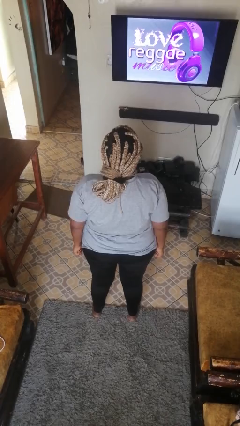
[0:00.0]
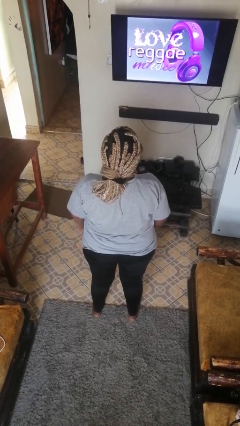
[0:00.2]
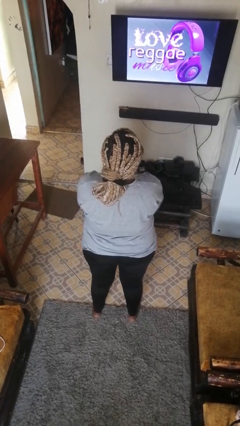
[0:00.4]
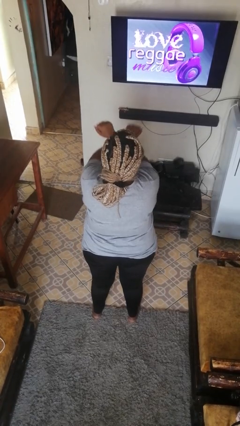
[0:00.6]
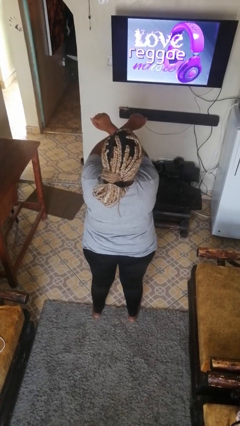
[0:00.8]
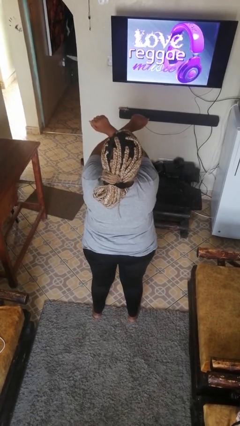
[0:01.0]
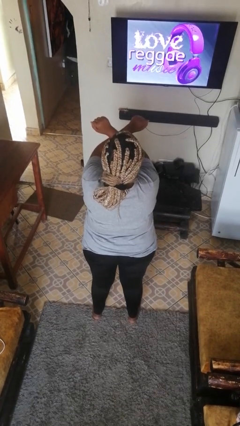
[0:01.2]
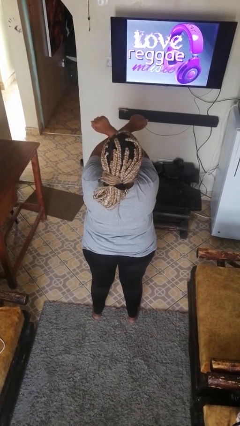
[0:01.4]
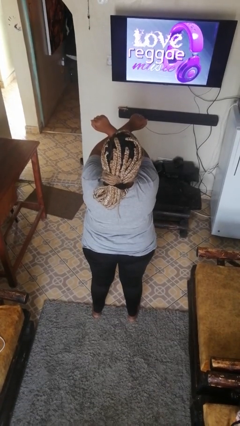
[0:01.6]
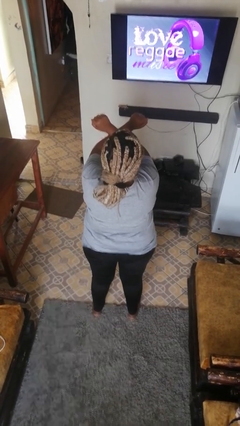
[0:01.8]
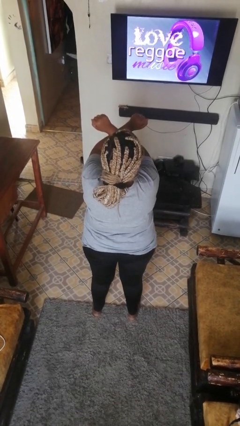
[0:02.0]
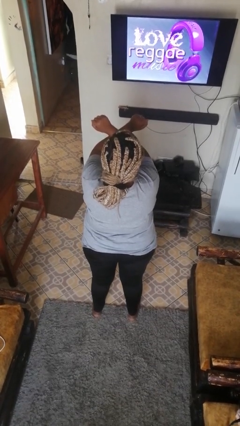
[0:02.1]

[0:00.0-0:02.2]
person gestures arms x

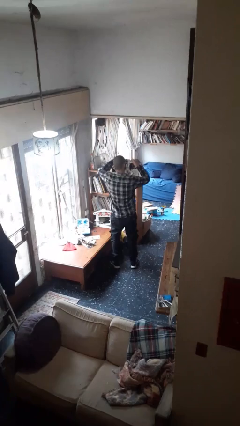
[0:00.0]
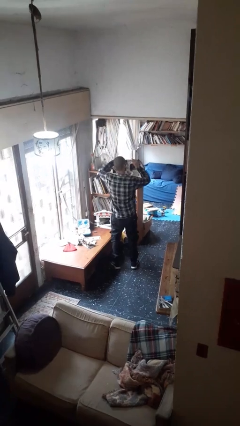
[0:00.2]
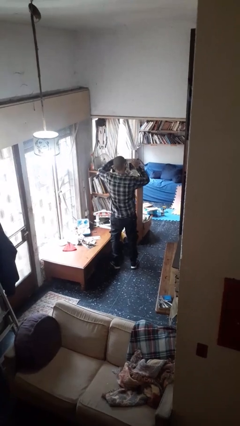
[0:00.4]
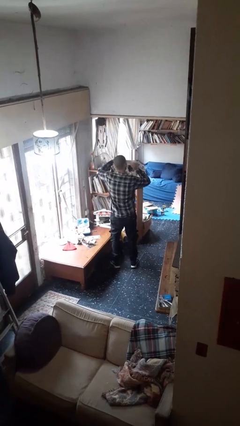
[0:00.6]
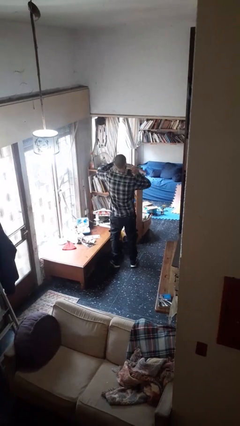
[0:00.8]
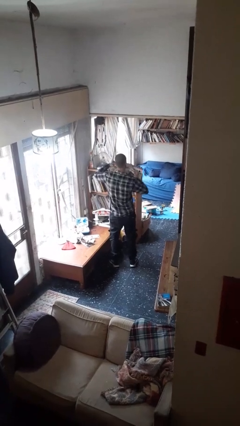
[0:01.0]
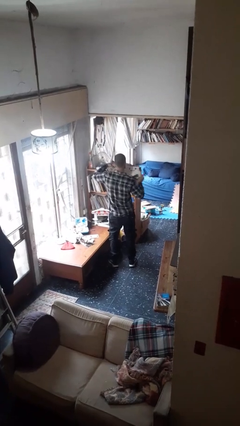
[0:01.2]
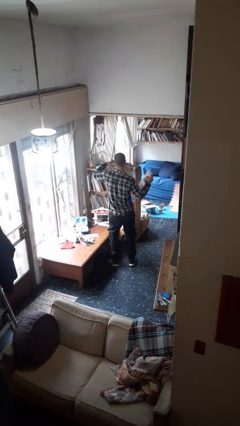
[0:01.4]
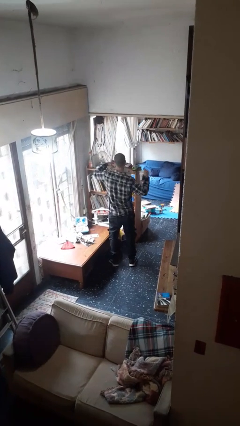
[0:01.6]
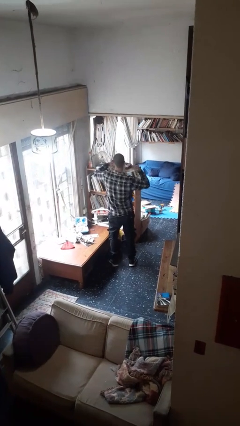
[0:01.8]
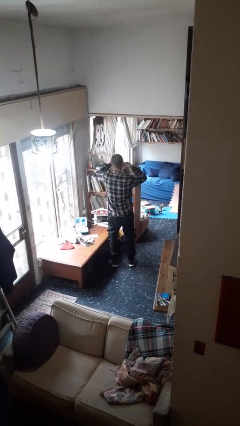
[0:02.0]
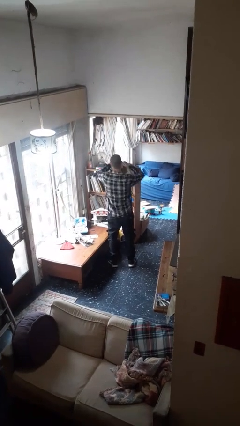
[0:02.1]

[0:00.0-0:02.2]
person tears paper

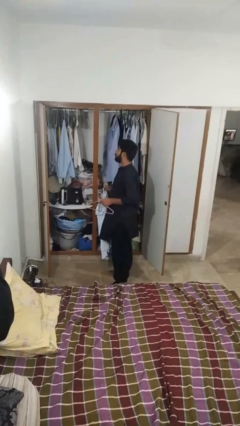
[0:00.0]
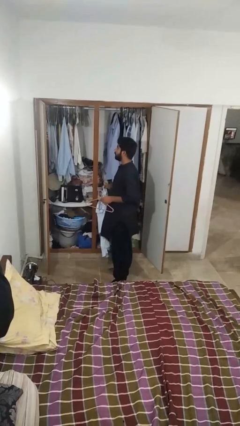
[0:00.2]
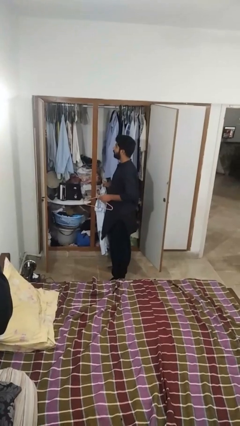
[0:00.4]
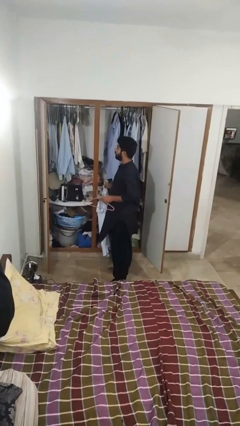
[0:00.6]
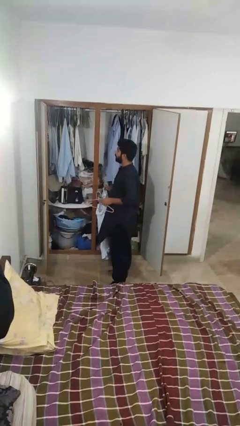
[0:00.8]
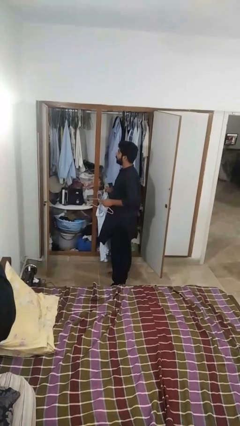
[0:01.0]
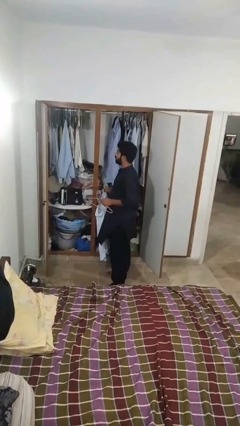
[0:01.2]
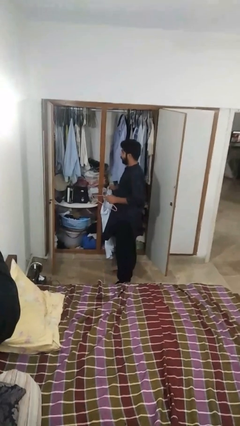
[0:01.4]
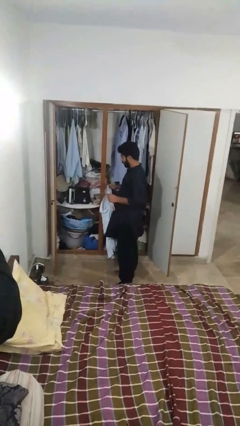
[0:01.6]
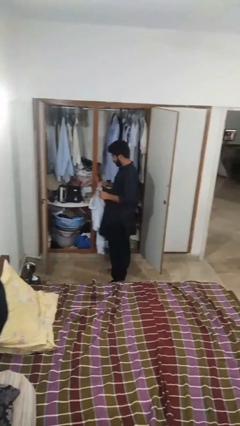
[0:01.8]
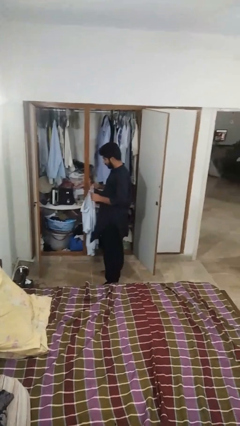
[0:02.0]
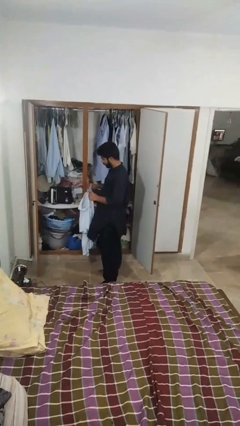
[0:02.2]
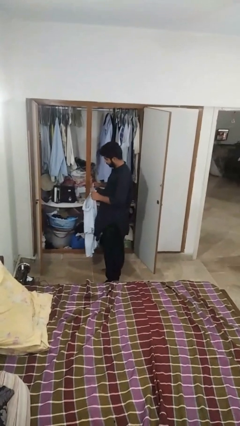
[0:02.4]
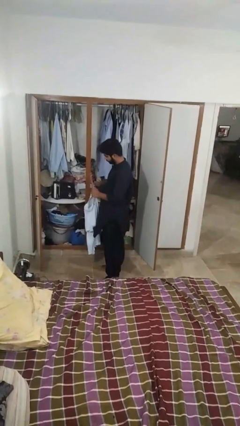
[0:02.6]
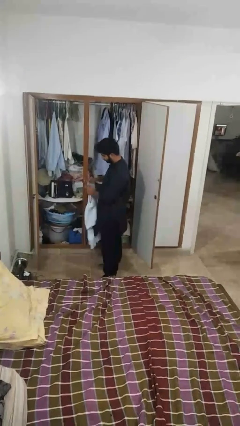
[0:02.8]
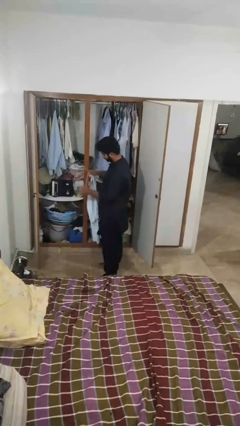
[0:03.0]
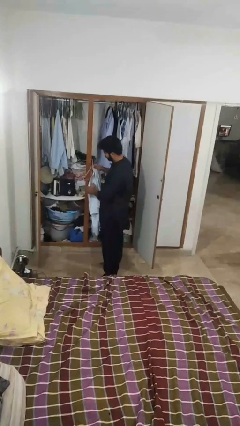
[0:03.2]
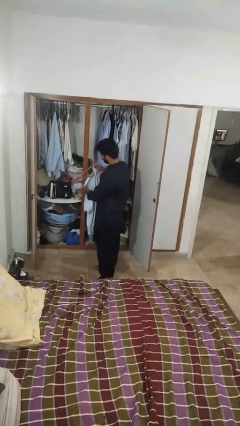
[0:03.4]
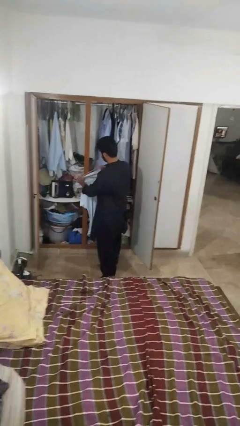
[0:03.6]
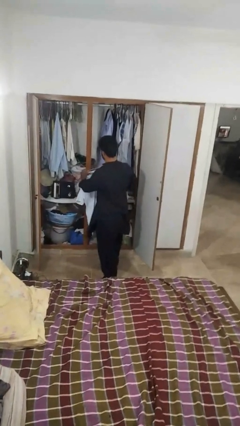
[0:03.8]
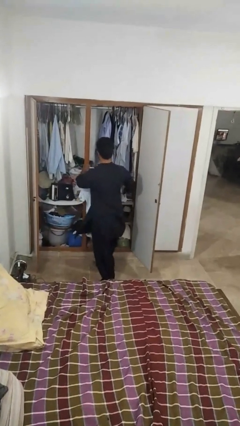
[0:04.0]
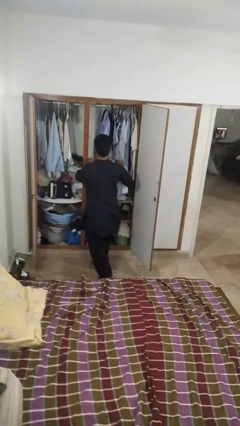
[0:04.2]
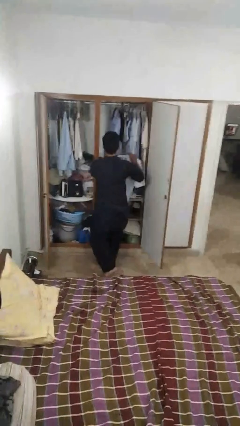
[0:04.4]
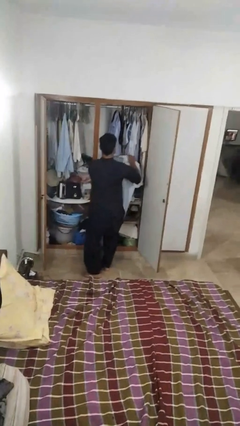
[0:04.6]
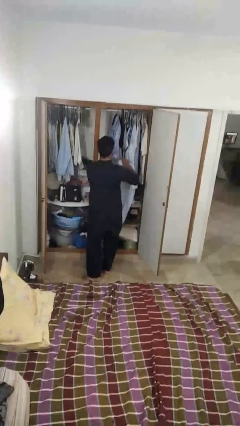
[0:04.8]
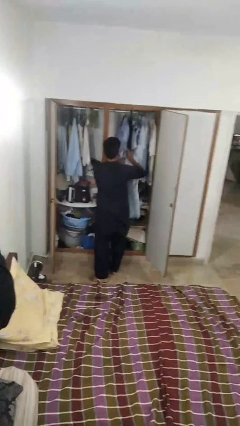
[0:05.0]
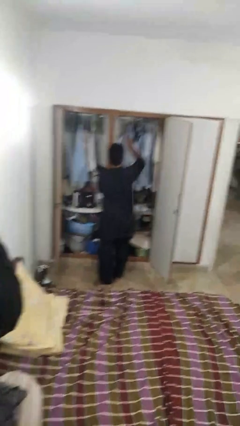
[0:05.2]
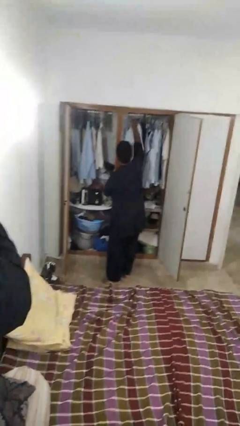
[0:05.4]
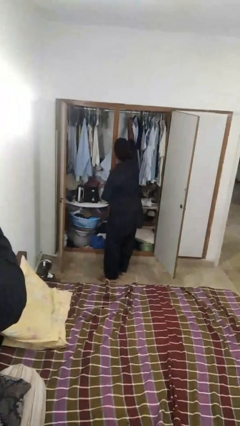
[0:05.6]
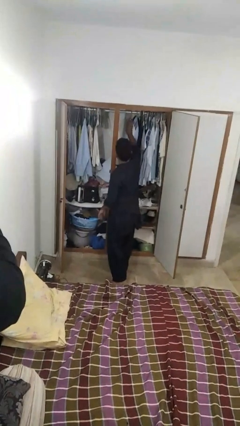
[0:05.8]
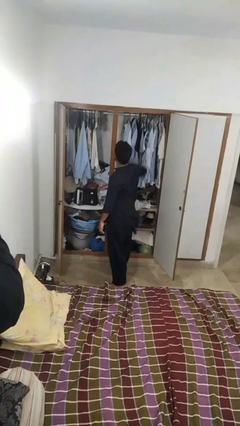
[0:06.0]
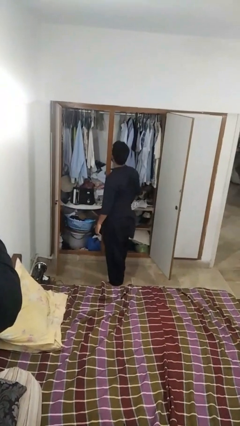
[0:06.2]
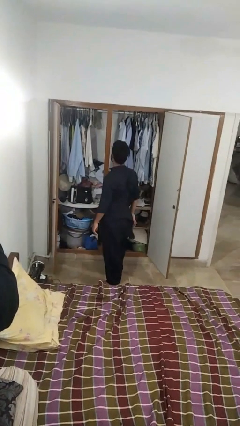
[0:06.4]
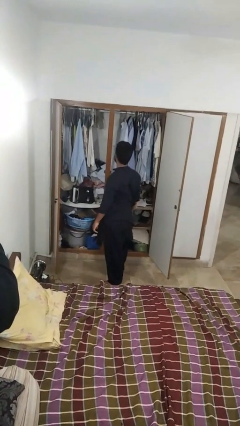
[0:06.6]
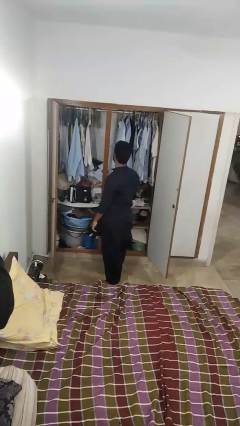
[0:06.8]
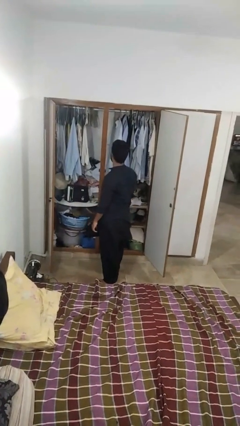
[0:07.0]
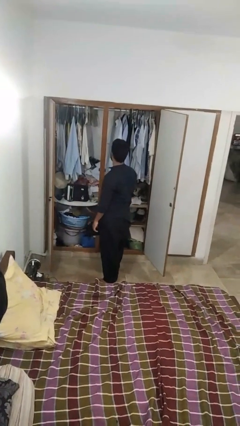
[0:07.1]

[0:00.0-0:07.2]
person puts clothes into dresser

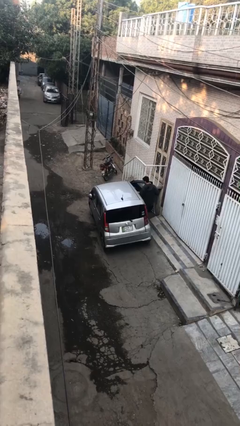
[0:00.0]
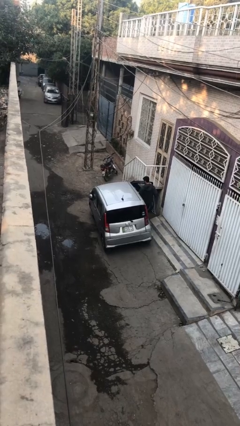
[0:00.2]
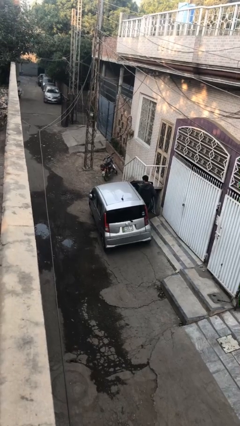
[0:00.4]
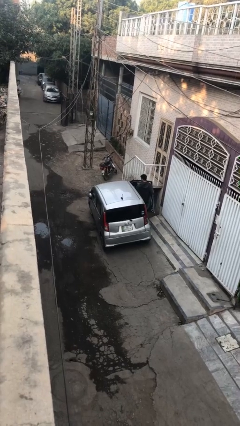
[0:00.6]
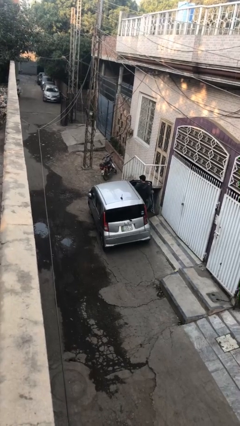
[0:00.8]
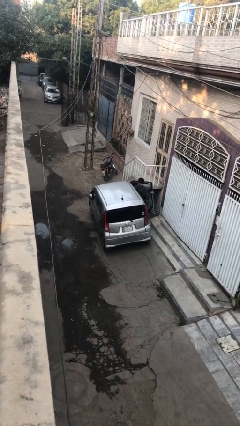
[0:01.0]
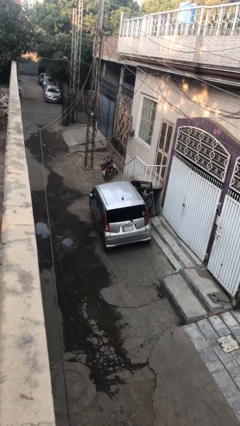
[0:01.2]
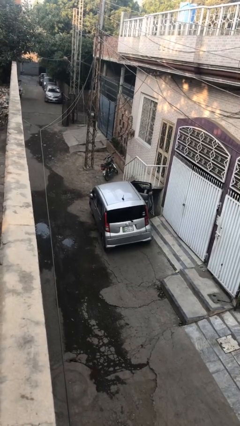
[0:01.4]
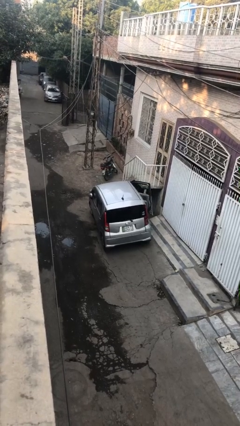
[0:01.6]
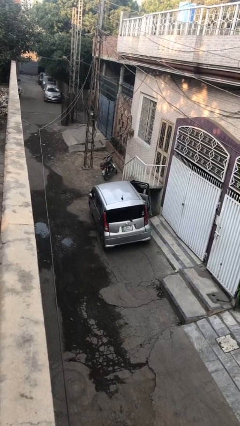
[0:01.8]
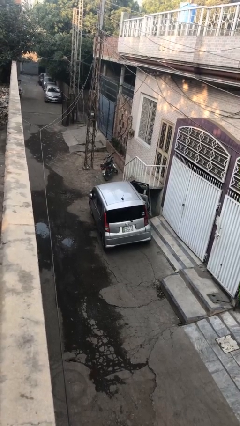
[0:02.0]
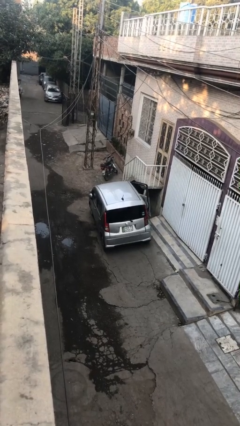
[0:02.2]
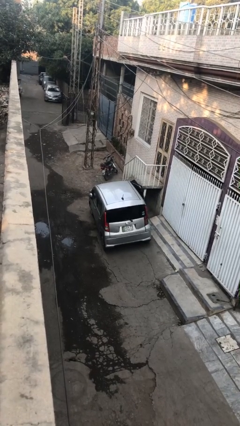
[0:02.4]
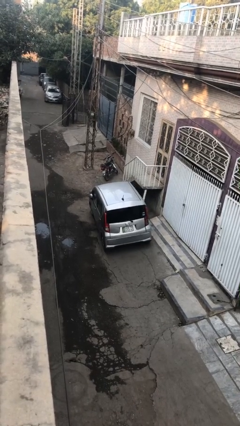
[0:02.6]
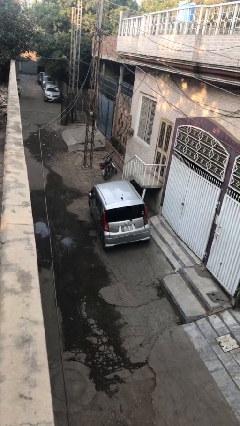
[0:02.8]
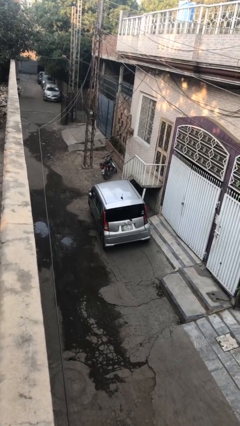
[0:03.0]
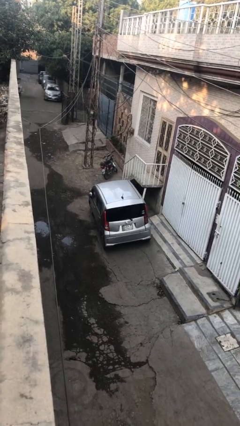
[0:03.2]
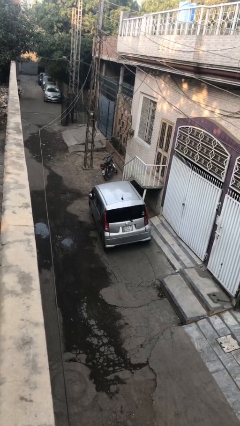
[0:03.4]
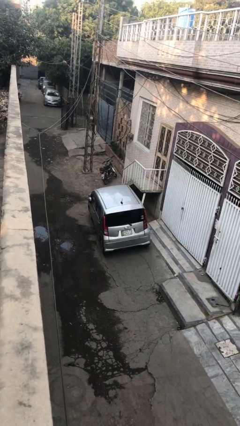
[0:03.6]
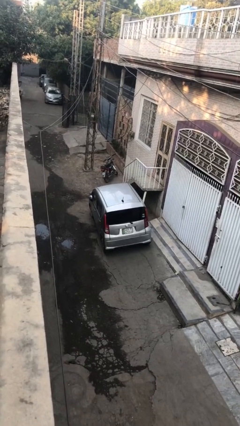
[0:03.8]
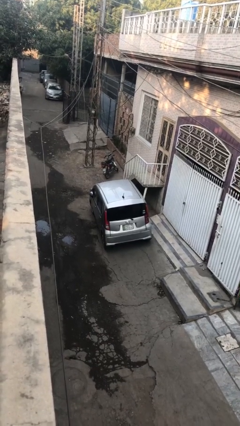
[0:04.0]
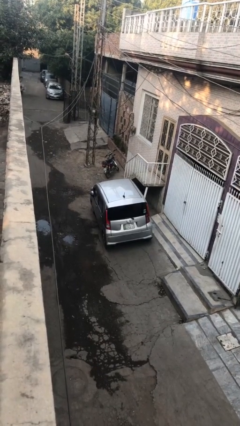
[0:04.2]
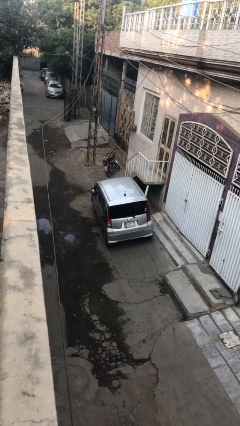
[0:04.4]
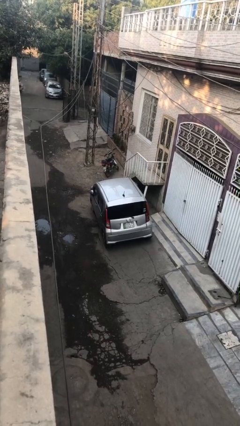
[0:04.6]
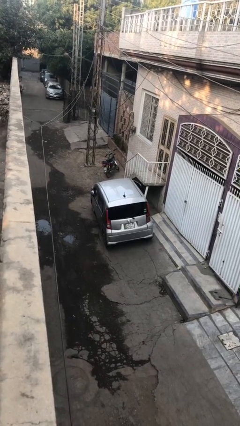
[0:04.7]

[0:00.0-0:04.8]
car picks up person

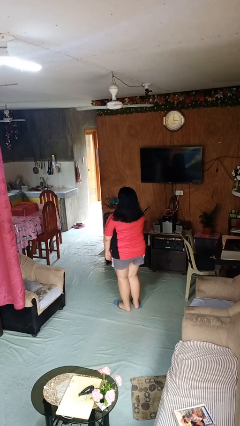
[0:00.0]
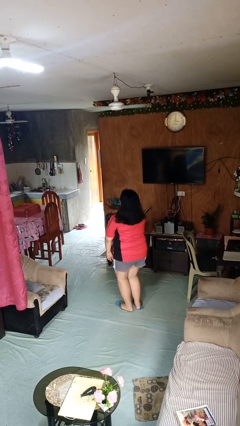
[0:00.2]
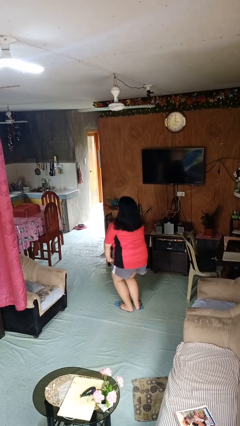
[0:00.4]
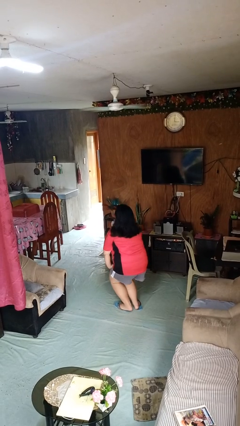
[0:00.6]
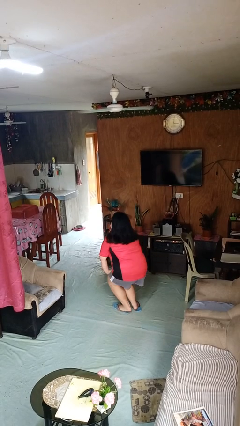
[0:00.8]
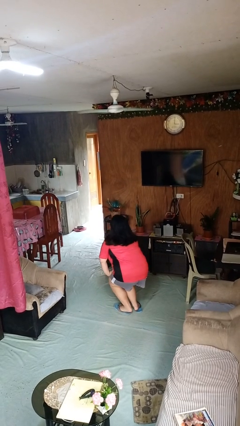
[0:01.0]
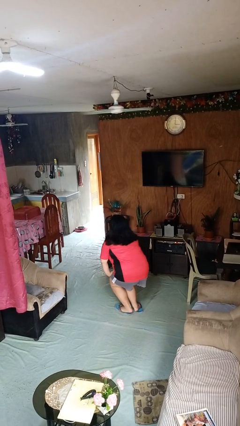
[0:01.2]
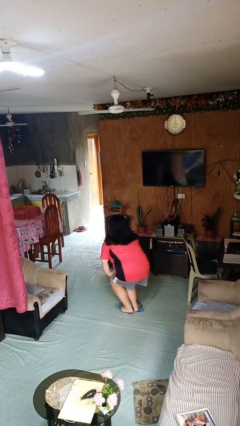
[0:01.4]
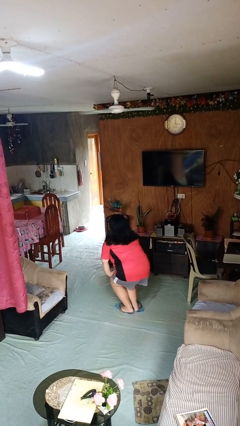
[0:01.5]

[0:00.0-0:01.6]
person squats
